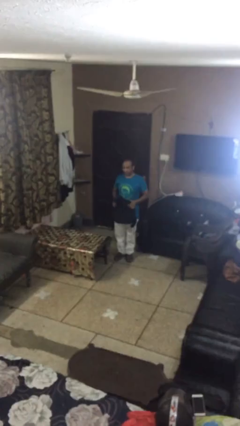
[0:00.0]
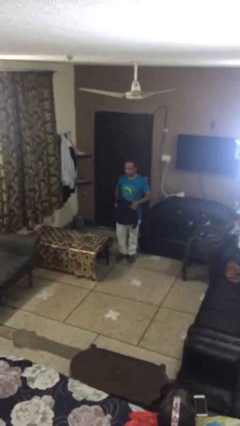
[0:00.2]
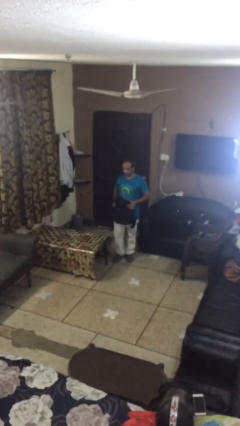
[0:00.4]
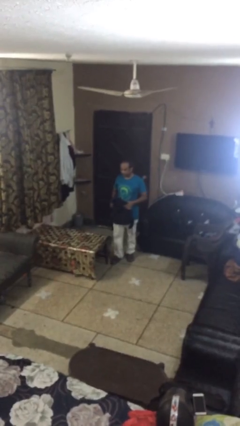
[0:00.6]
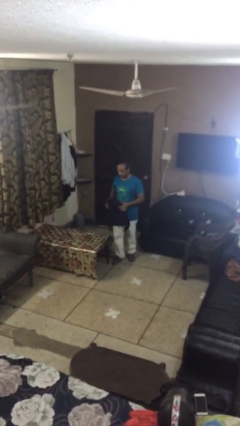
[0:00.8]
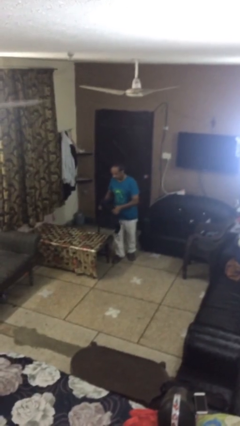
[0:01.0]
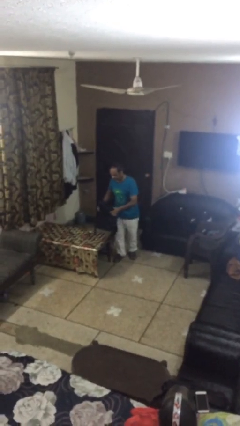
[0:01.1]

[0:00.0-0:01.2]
person puts down object on table

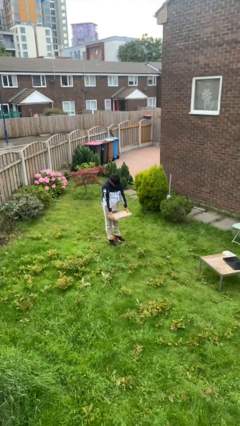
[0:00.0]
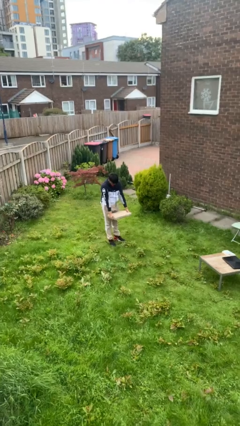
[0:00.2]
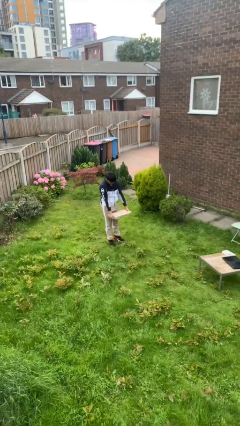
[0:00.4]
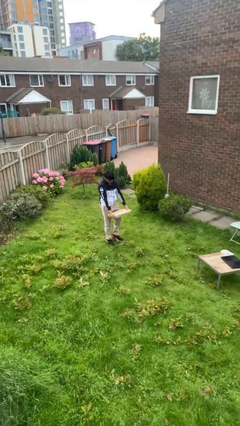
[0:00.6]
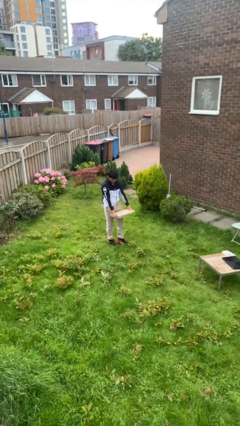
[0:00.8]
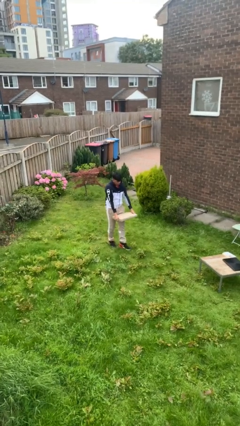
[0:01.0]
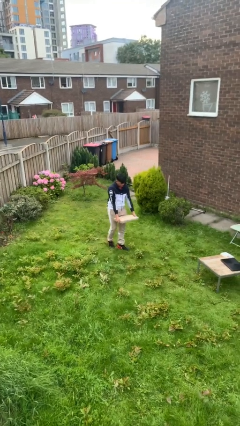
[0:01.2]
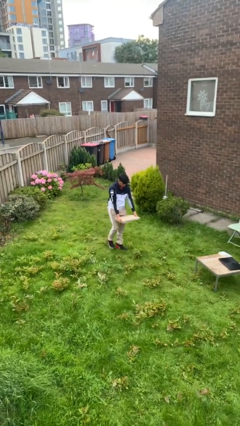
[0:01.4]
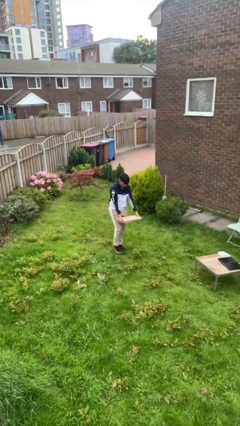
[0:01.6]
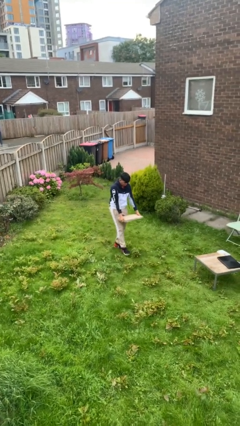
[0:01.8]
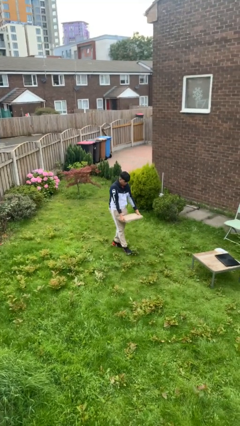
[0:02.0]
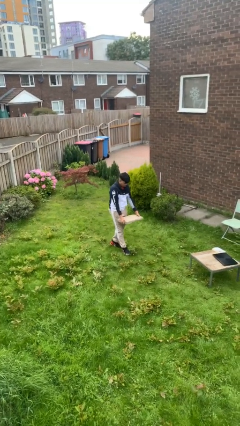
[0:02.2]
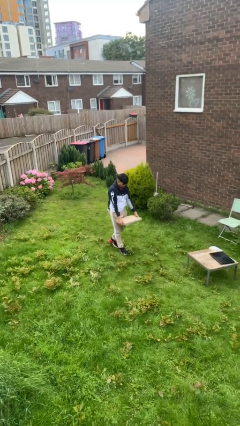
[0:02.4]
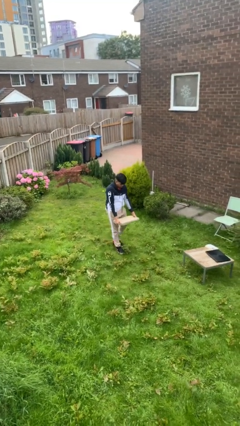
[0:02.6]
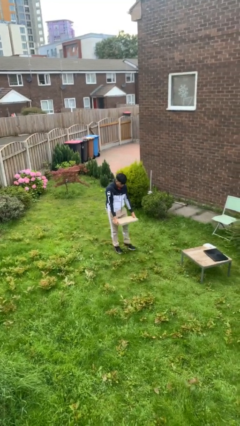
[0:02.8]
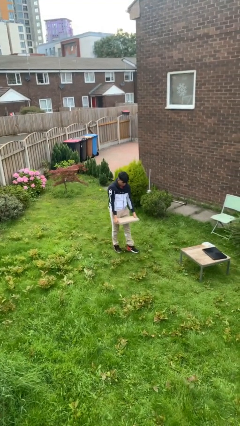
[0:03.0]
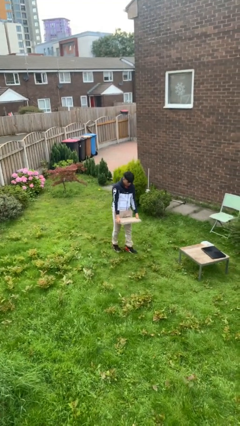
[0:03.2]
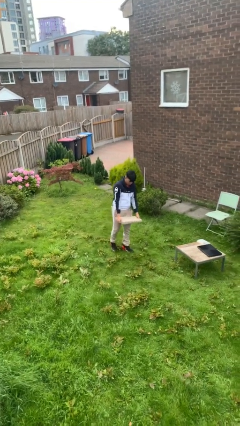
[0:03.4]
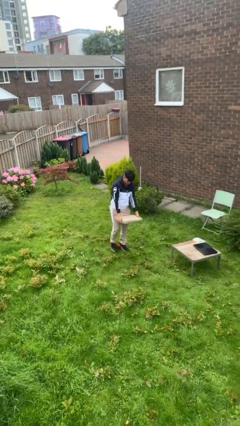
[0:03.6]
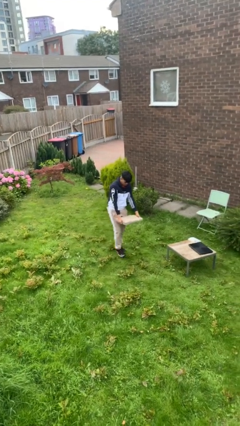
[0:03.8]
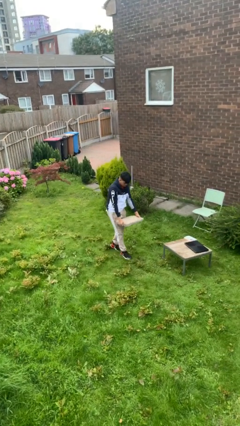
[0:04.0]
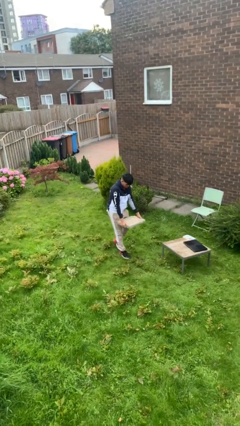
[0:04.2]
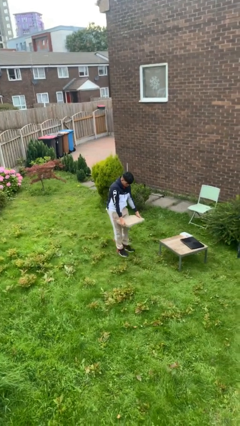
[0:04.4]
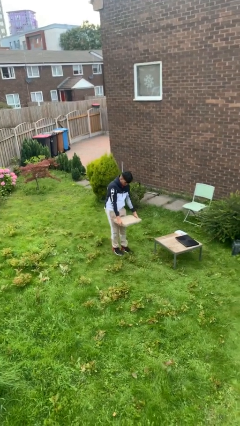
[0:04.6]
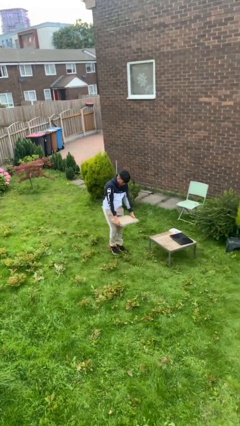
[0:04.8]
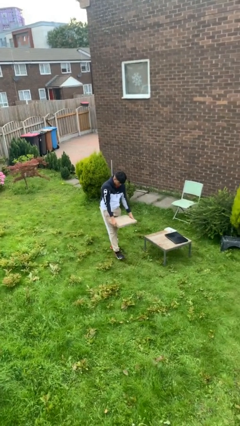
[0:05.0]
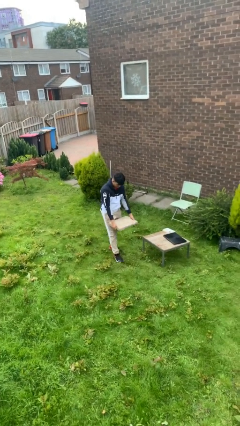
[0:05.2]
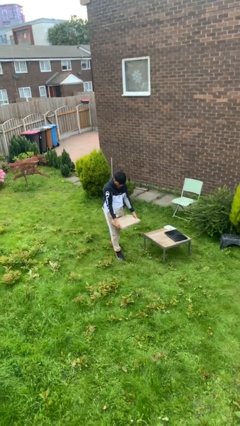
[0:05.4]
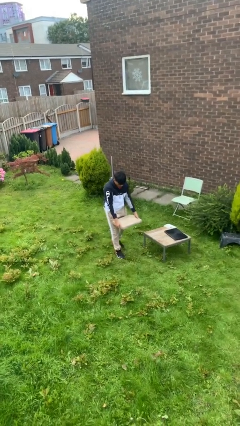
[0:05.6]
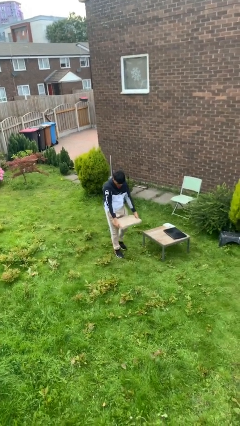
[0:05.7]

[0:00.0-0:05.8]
person carries heavy object

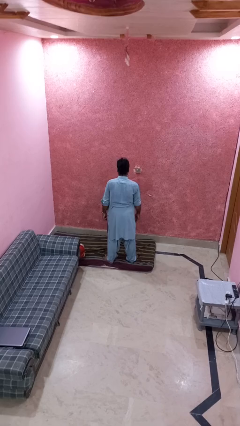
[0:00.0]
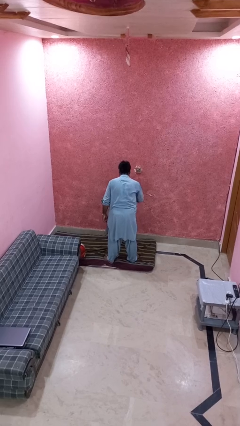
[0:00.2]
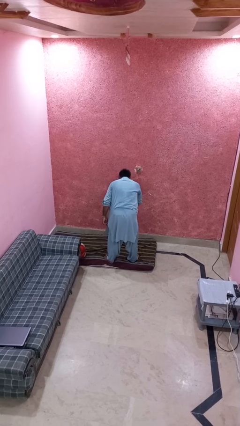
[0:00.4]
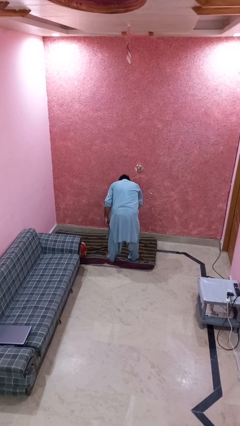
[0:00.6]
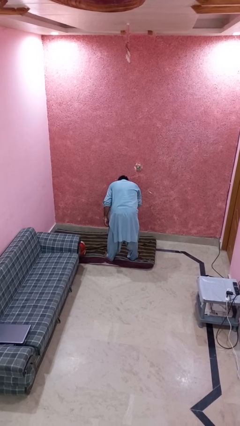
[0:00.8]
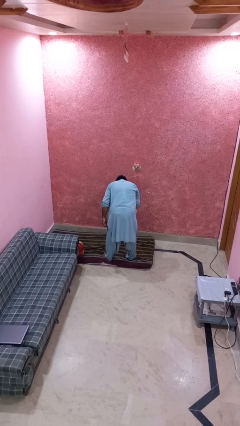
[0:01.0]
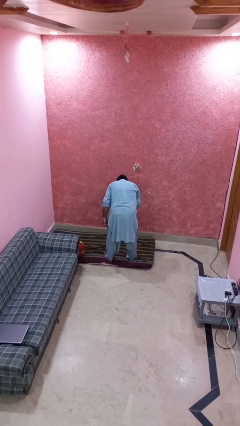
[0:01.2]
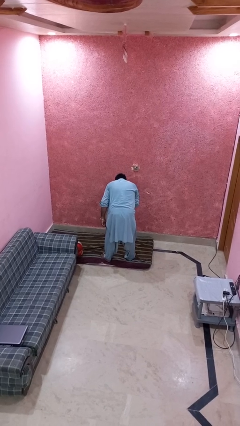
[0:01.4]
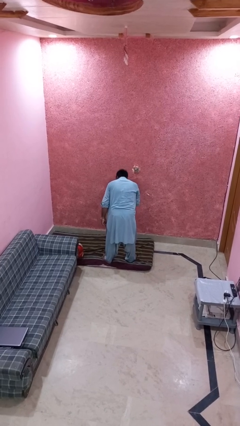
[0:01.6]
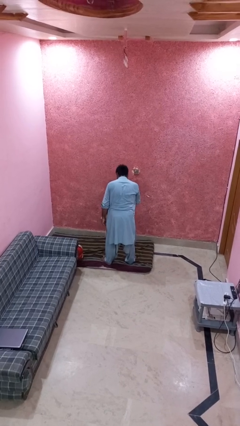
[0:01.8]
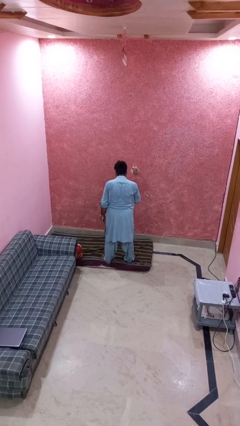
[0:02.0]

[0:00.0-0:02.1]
person bows

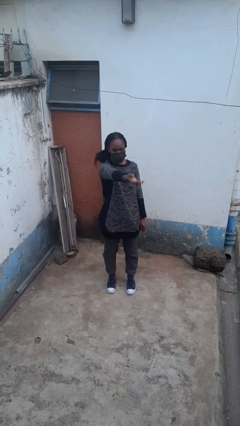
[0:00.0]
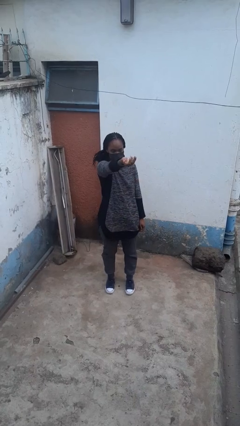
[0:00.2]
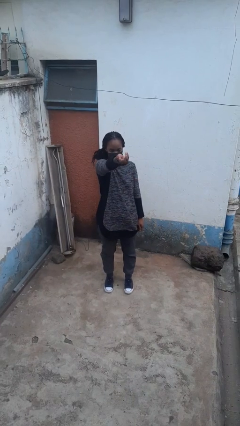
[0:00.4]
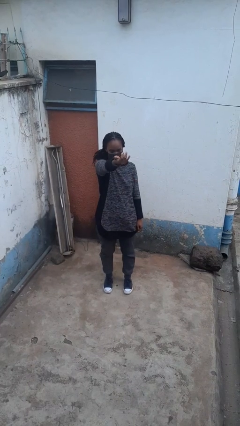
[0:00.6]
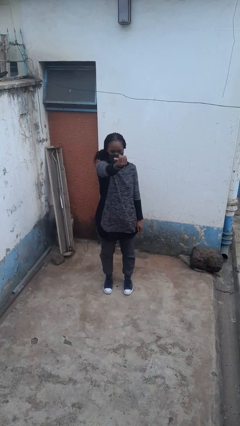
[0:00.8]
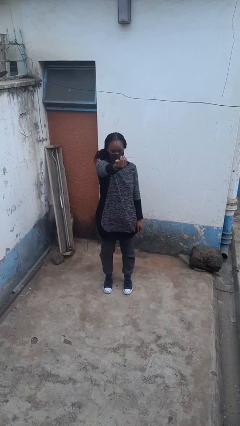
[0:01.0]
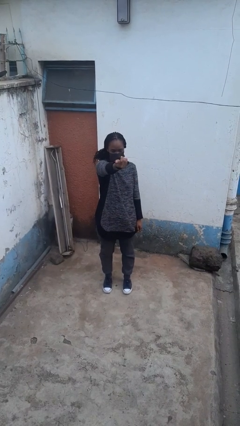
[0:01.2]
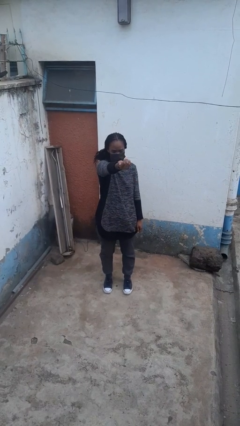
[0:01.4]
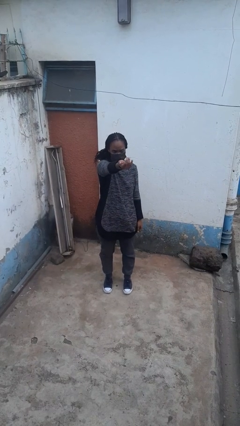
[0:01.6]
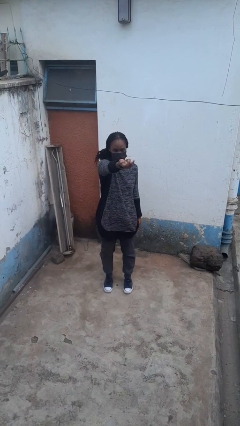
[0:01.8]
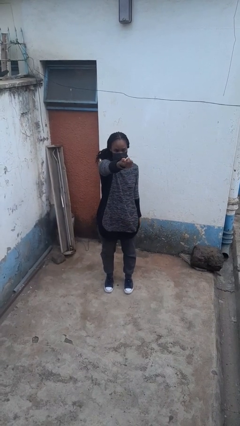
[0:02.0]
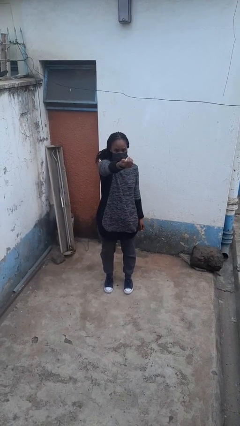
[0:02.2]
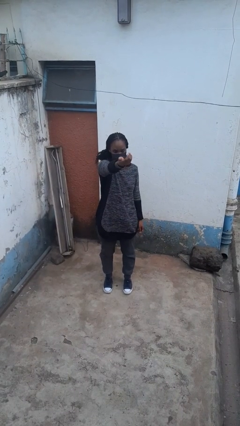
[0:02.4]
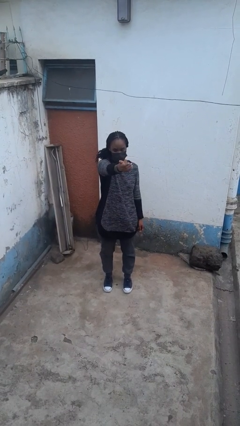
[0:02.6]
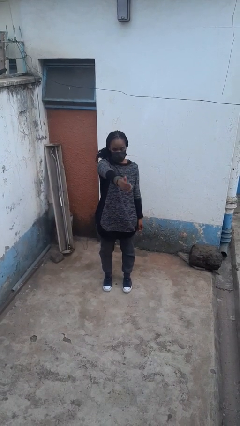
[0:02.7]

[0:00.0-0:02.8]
person gestures come here

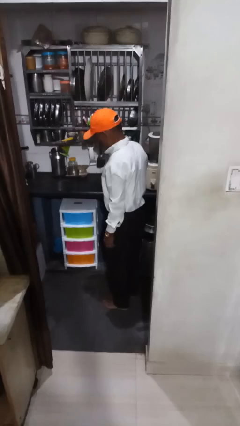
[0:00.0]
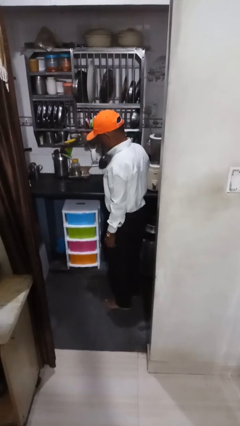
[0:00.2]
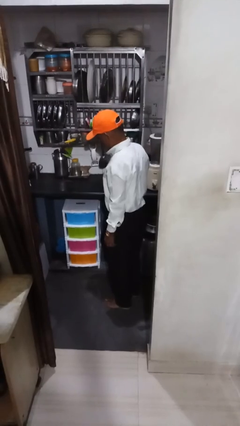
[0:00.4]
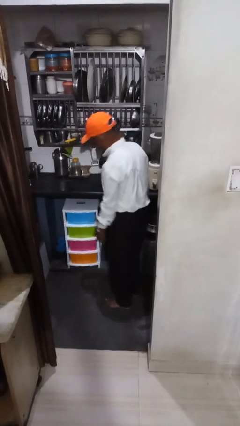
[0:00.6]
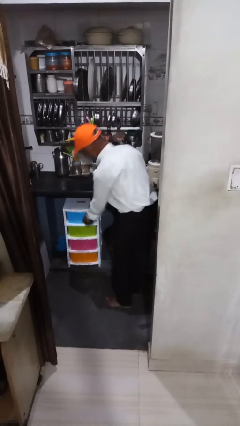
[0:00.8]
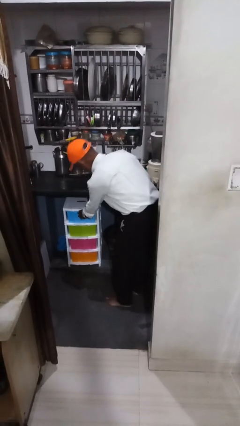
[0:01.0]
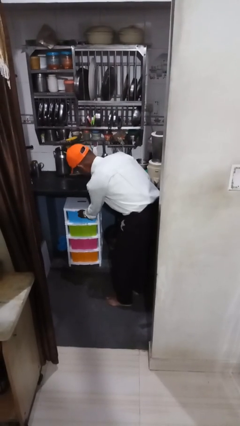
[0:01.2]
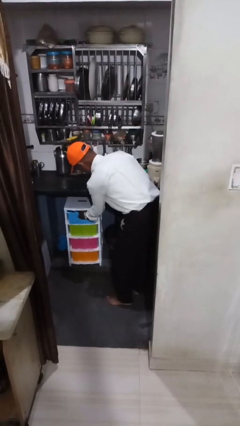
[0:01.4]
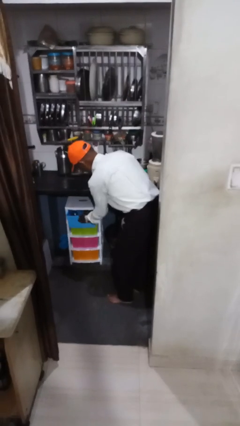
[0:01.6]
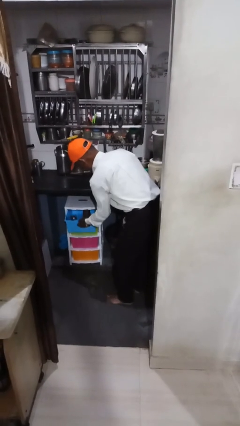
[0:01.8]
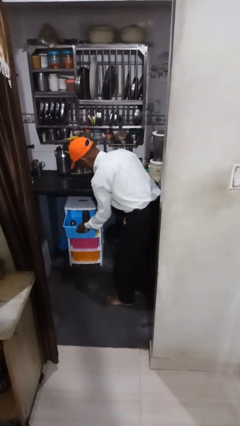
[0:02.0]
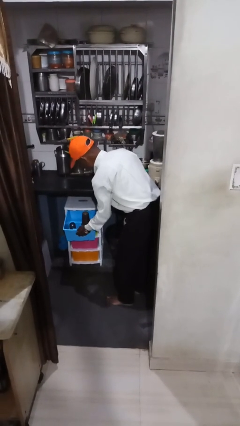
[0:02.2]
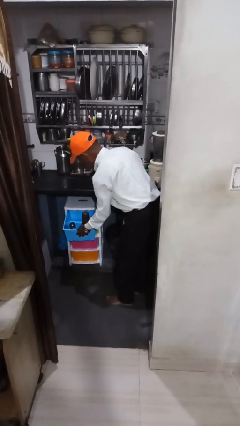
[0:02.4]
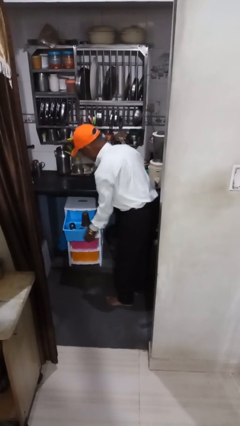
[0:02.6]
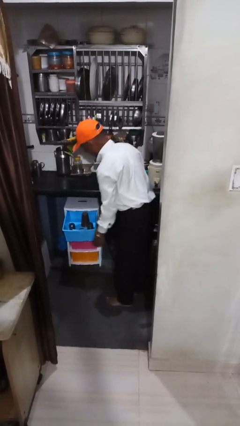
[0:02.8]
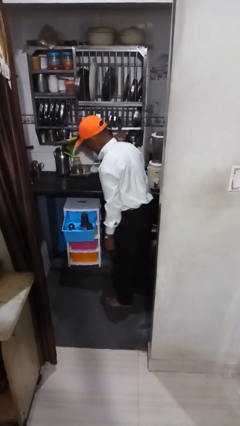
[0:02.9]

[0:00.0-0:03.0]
person opens kitchen drawer

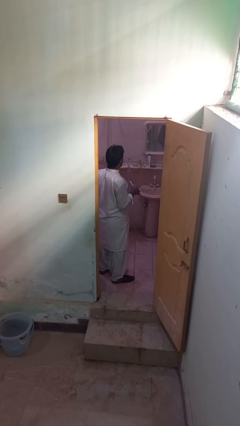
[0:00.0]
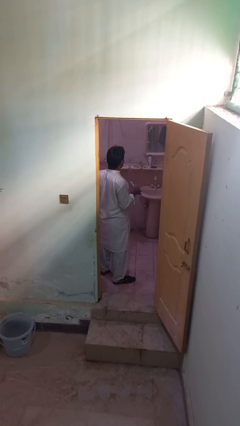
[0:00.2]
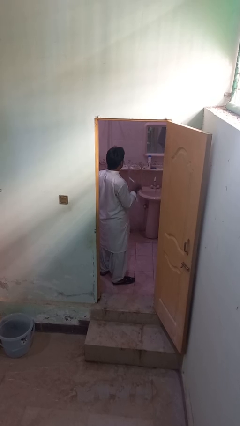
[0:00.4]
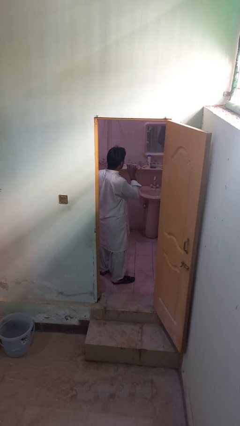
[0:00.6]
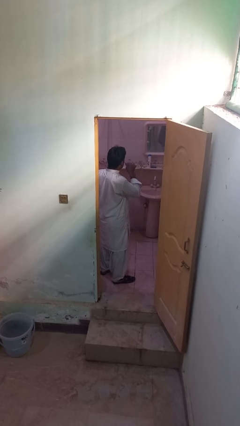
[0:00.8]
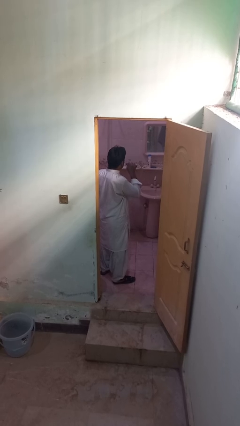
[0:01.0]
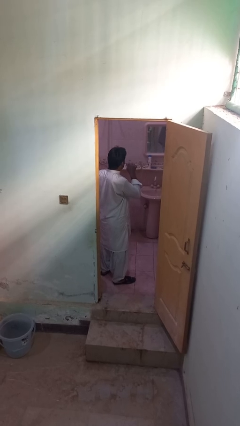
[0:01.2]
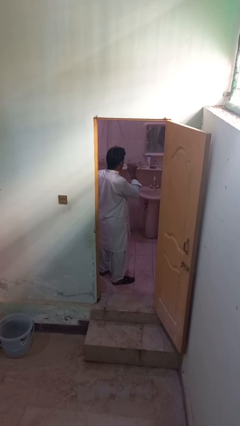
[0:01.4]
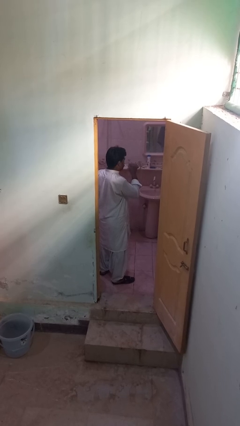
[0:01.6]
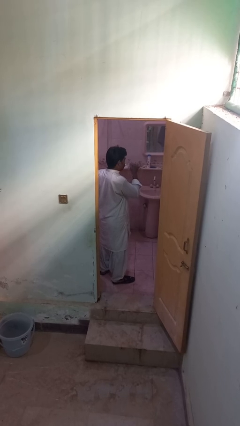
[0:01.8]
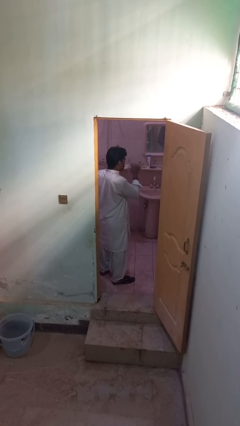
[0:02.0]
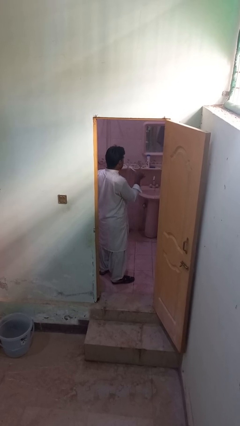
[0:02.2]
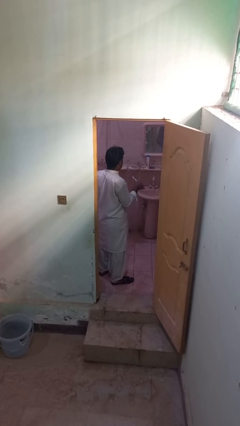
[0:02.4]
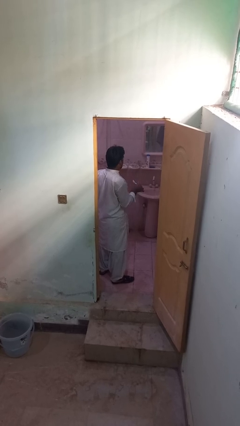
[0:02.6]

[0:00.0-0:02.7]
person brushes teeth
